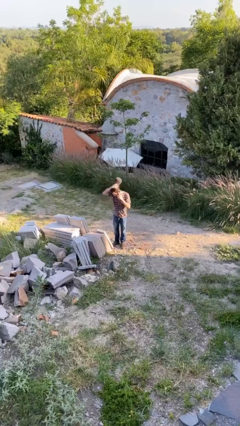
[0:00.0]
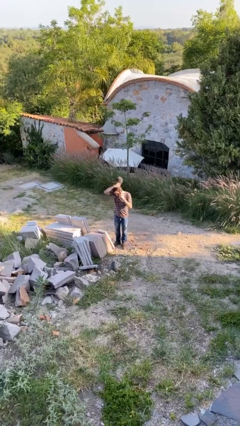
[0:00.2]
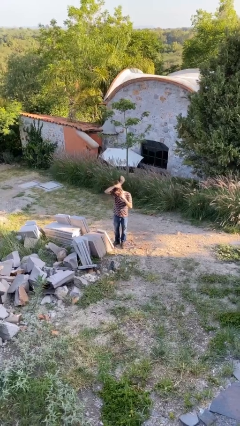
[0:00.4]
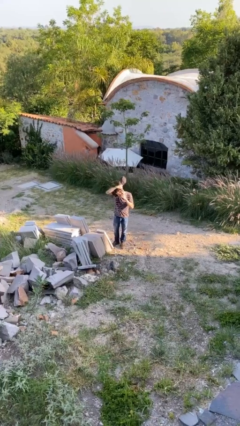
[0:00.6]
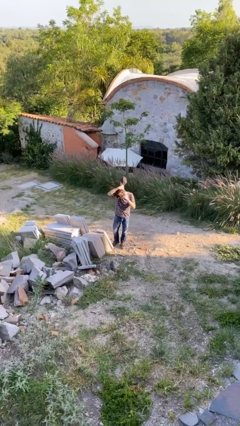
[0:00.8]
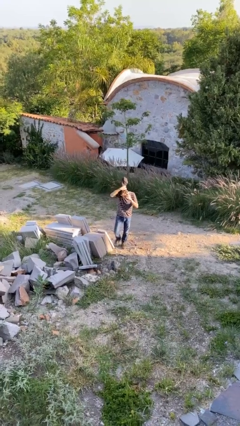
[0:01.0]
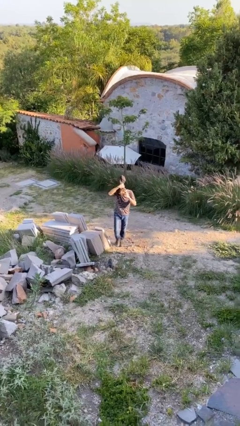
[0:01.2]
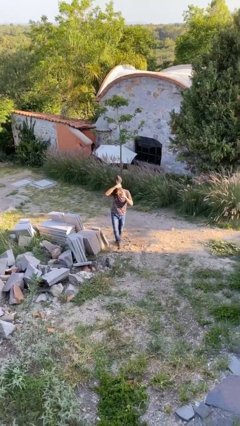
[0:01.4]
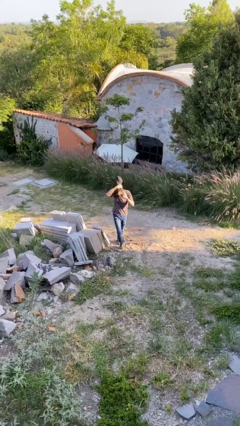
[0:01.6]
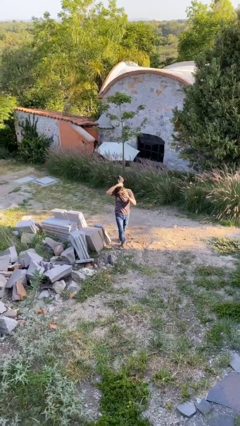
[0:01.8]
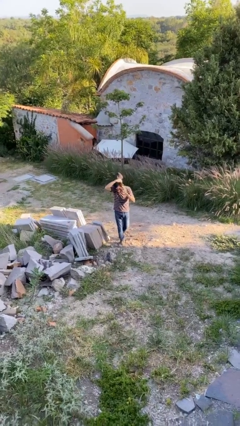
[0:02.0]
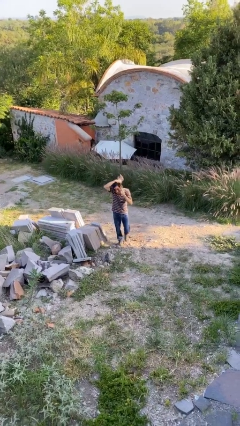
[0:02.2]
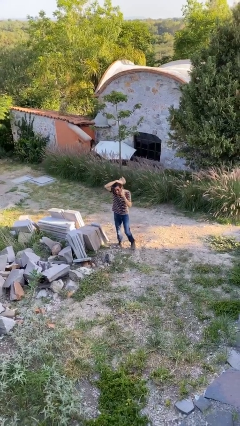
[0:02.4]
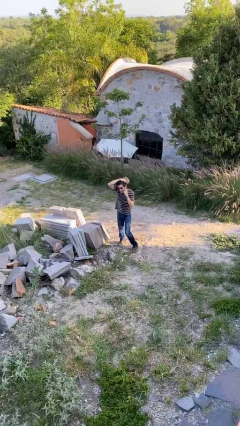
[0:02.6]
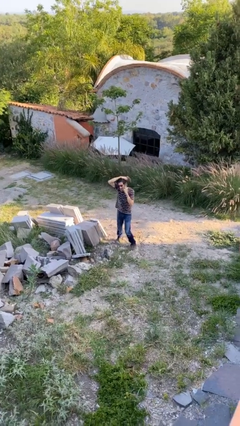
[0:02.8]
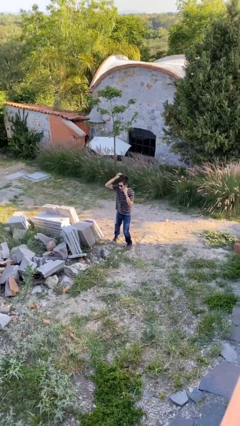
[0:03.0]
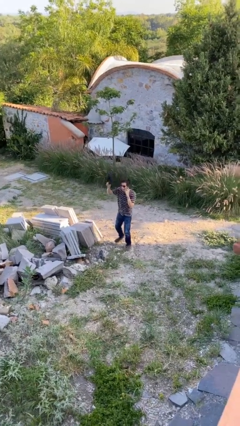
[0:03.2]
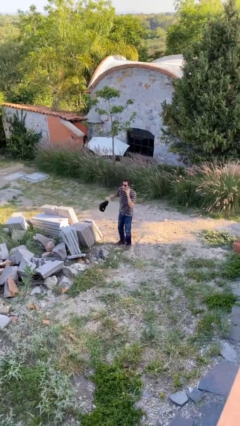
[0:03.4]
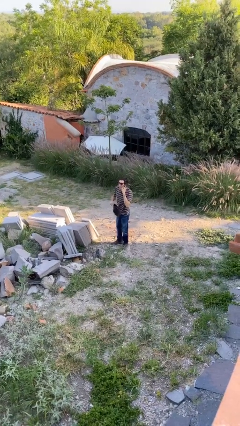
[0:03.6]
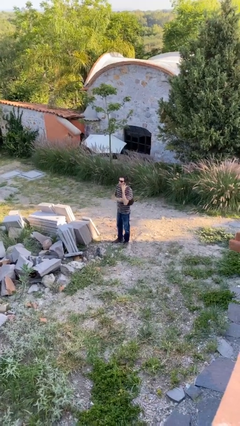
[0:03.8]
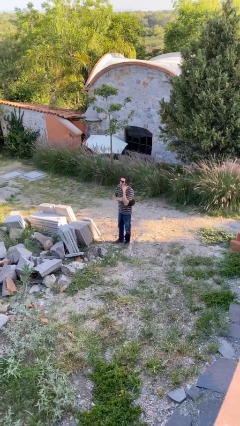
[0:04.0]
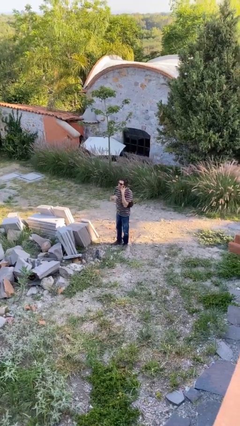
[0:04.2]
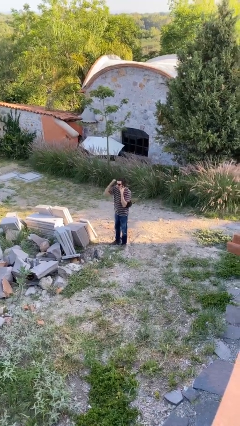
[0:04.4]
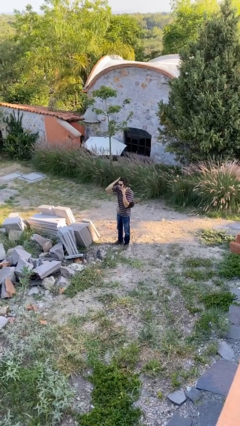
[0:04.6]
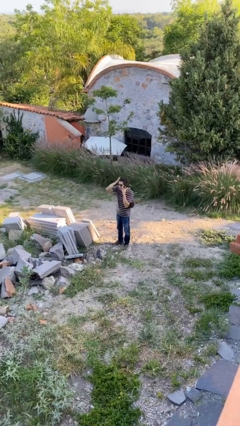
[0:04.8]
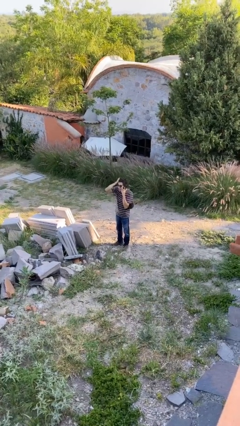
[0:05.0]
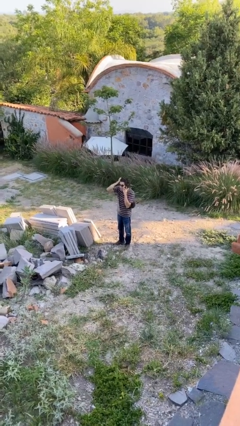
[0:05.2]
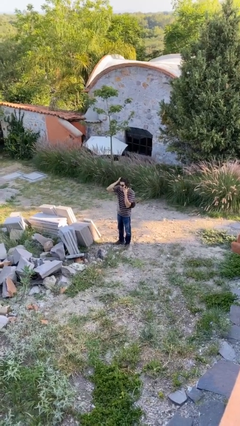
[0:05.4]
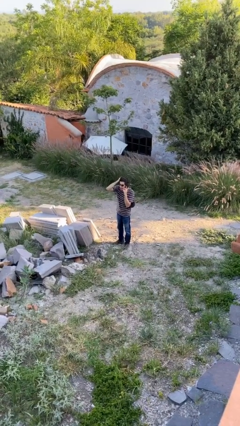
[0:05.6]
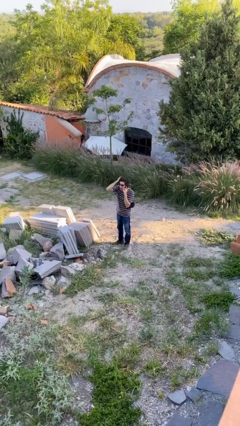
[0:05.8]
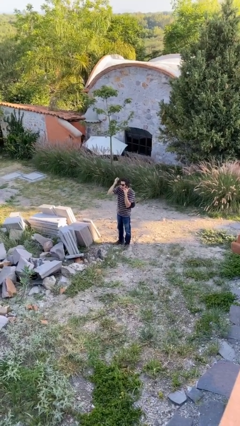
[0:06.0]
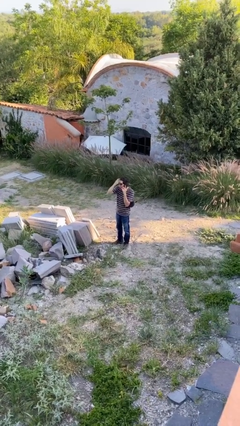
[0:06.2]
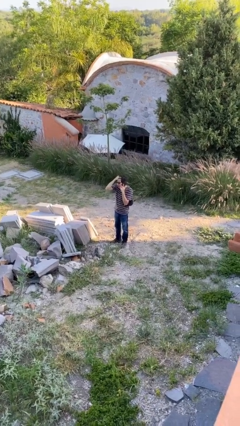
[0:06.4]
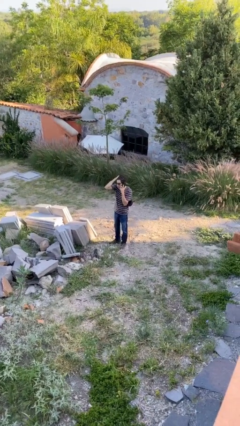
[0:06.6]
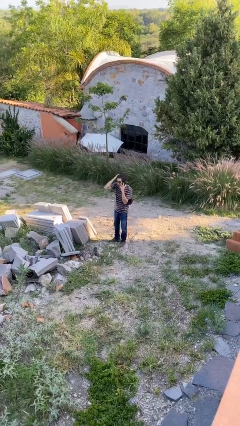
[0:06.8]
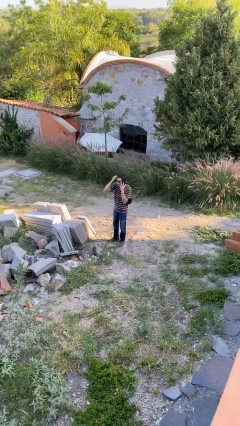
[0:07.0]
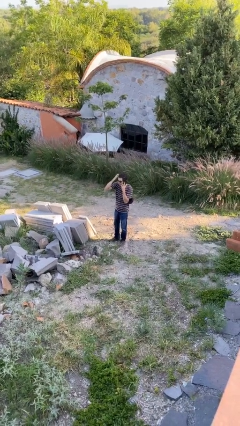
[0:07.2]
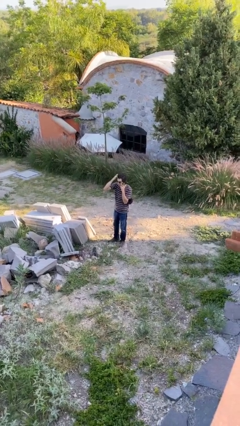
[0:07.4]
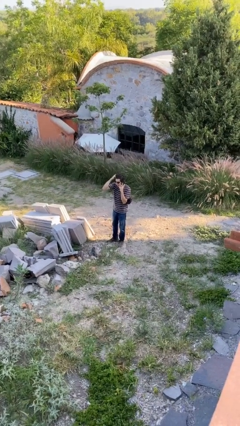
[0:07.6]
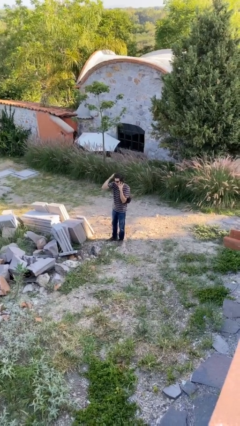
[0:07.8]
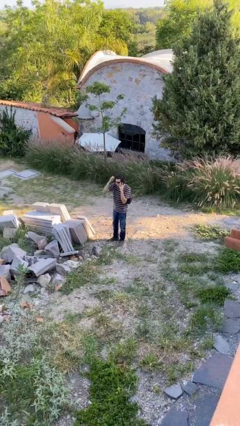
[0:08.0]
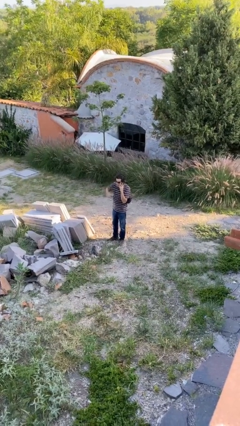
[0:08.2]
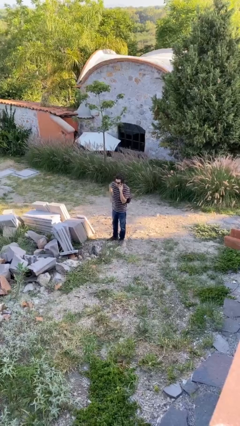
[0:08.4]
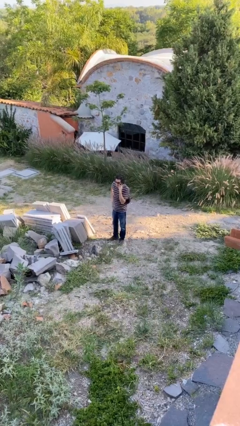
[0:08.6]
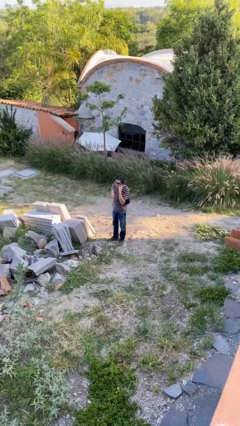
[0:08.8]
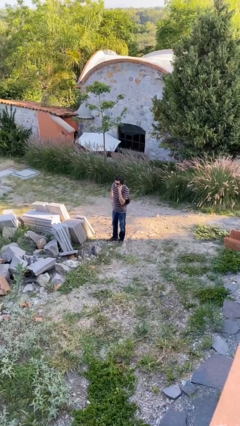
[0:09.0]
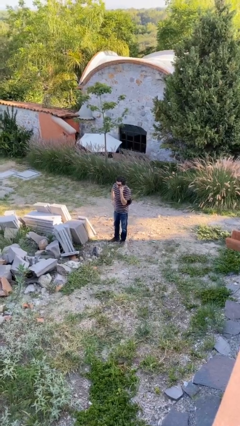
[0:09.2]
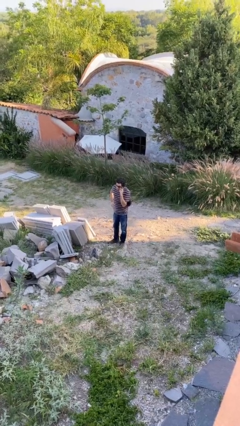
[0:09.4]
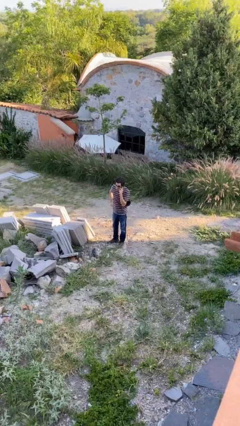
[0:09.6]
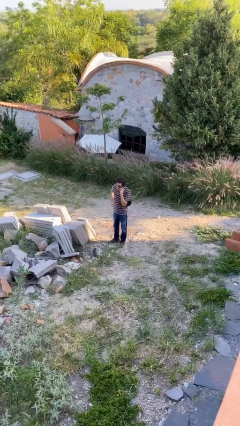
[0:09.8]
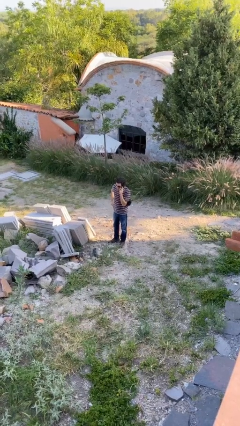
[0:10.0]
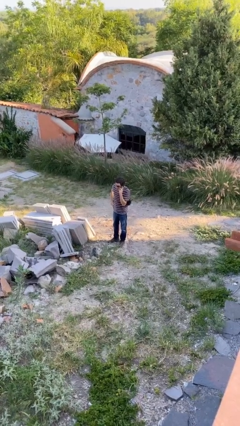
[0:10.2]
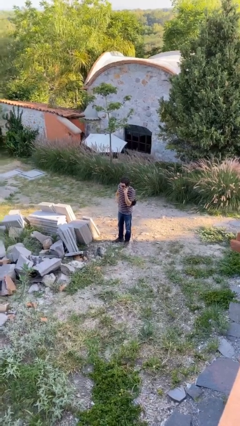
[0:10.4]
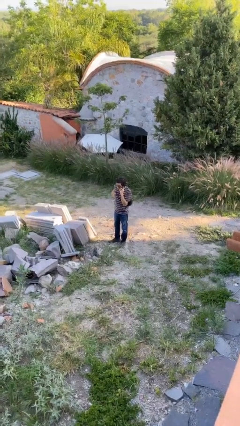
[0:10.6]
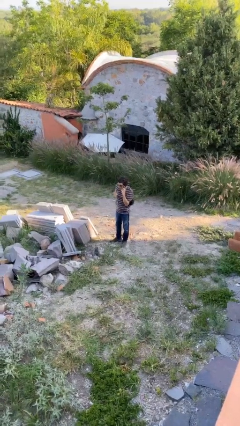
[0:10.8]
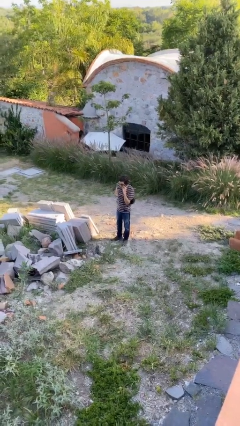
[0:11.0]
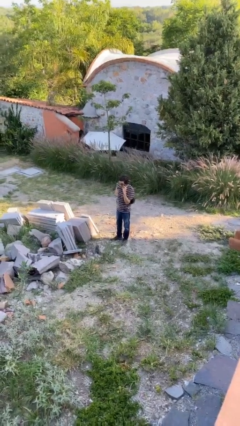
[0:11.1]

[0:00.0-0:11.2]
person talks on phone

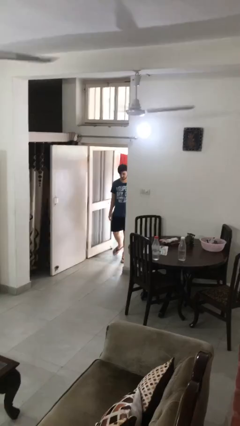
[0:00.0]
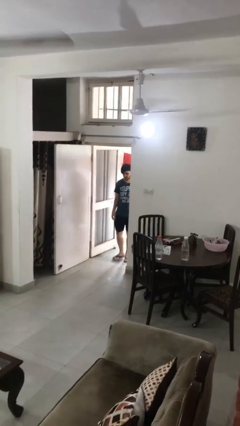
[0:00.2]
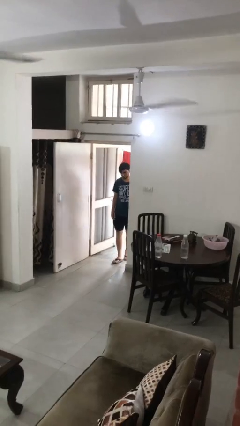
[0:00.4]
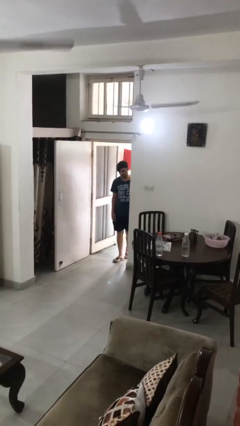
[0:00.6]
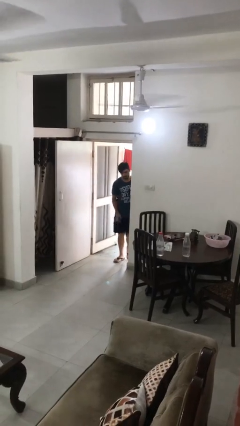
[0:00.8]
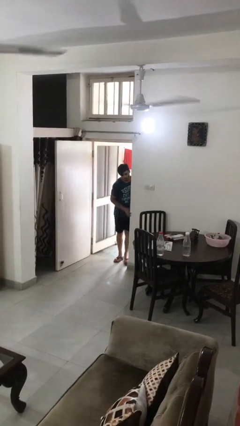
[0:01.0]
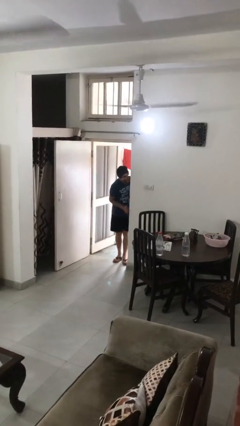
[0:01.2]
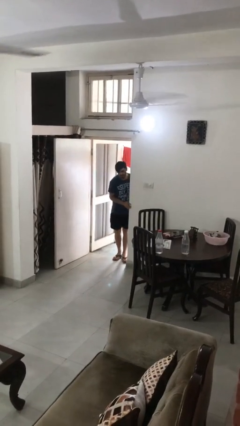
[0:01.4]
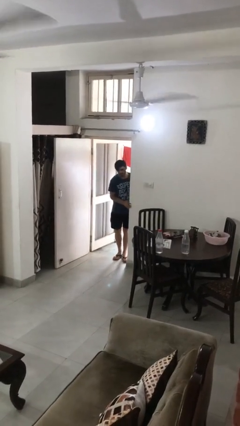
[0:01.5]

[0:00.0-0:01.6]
person bumps into wall

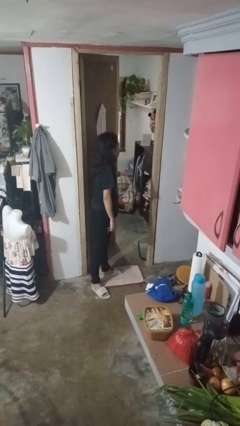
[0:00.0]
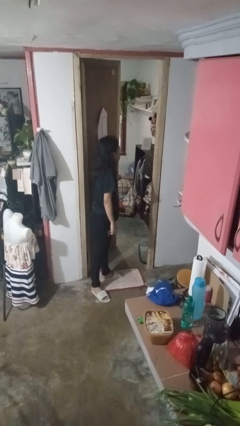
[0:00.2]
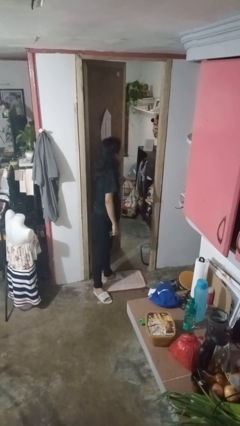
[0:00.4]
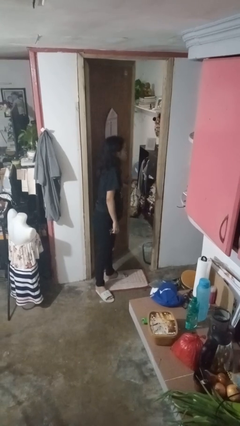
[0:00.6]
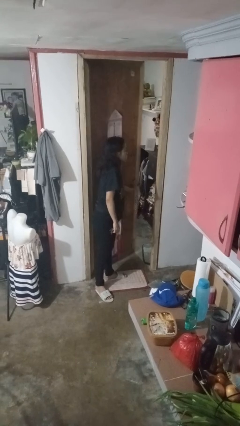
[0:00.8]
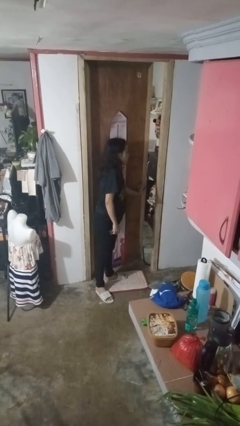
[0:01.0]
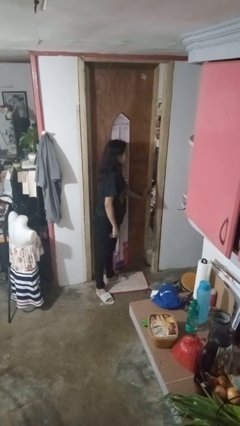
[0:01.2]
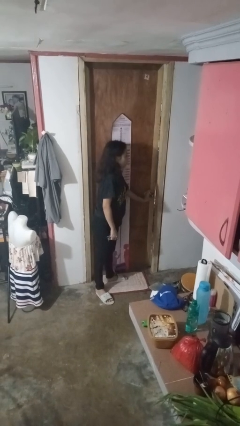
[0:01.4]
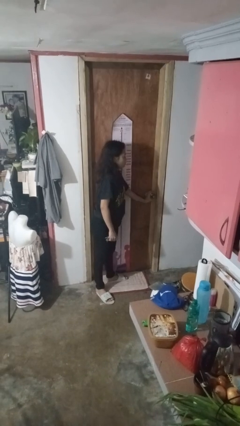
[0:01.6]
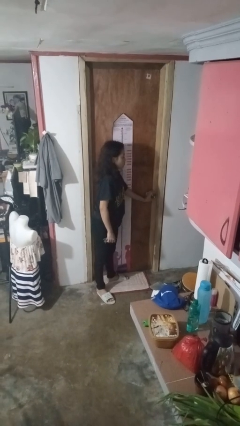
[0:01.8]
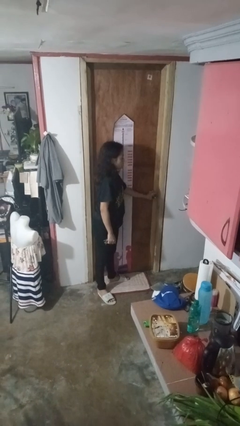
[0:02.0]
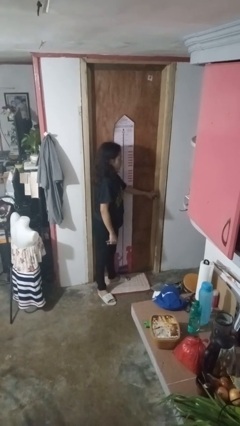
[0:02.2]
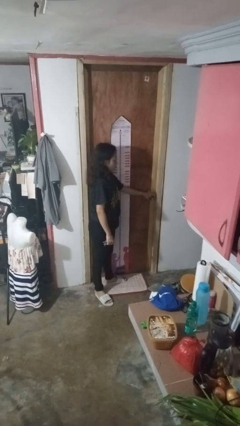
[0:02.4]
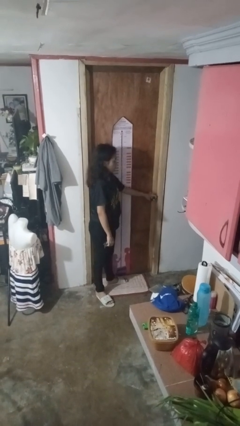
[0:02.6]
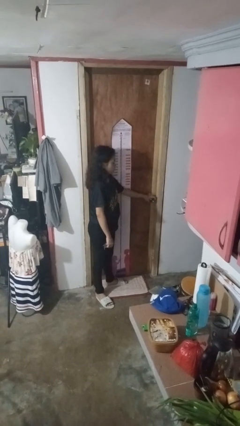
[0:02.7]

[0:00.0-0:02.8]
person closes facility door

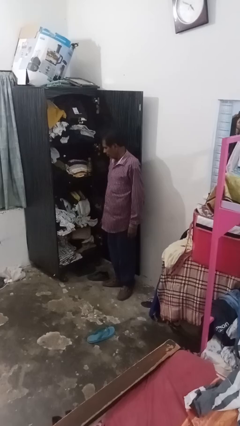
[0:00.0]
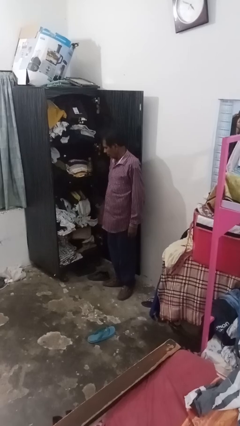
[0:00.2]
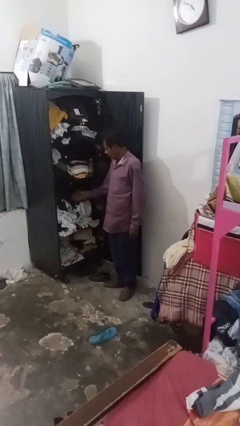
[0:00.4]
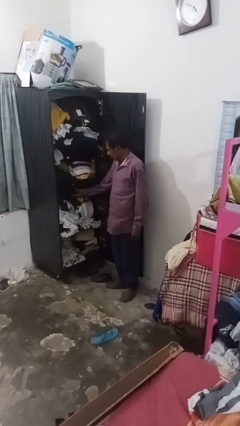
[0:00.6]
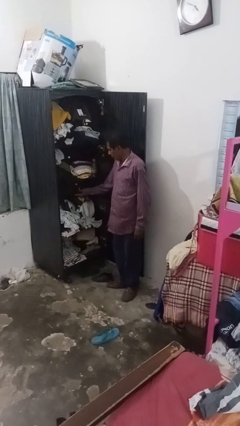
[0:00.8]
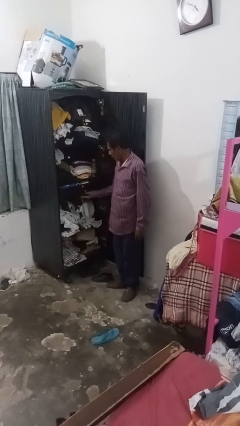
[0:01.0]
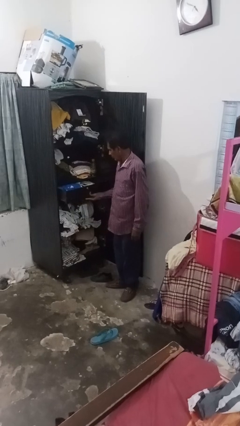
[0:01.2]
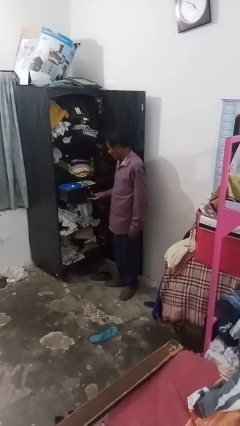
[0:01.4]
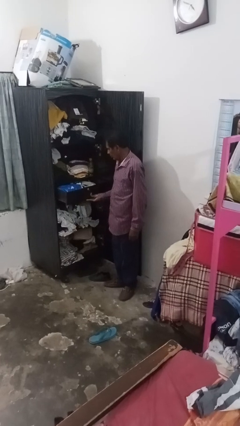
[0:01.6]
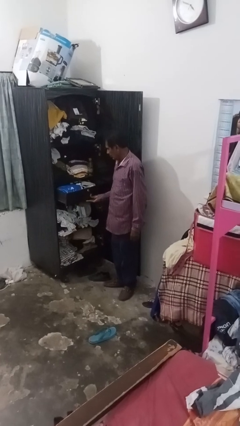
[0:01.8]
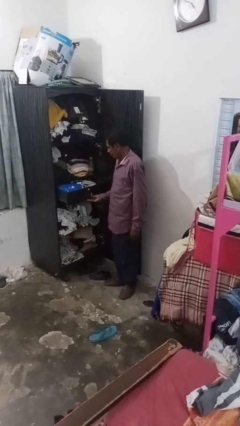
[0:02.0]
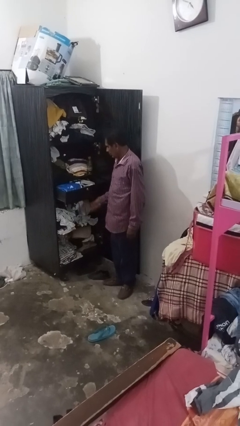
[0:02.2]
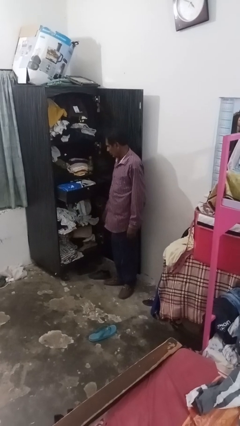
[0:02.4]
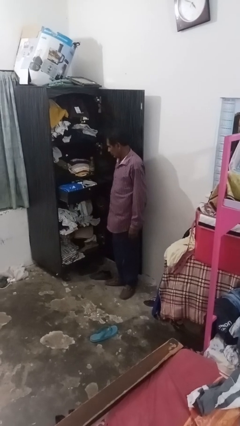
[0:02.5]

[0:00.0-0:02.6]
person opens dresser drawer
